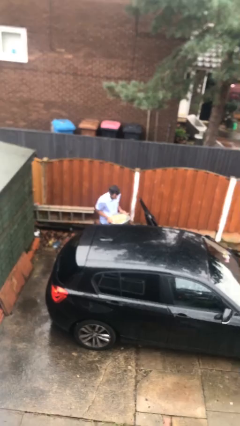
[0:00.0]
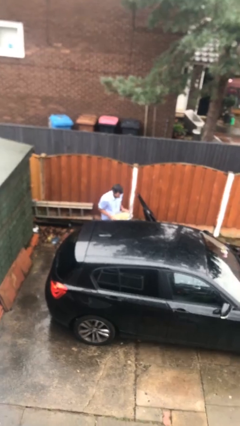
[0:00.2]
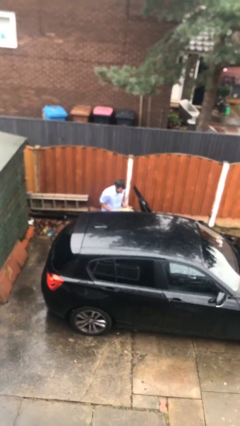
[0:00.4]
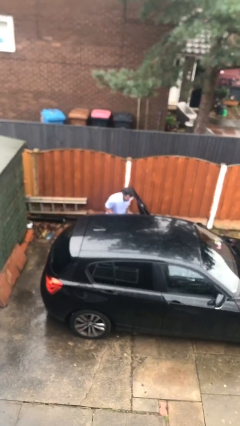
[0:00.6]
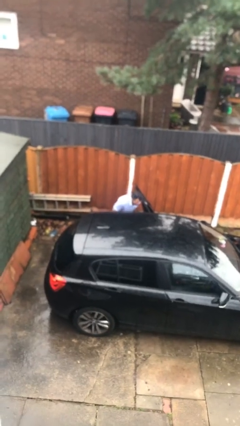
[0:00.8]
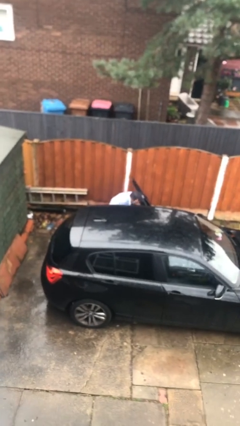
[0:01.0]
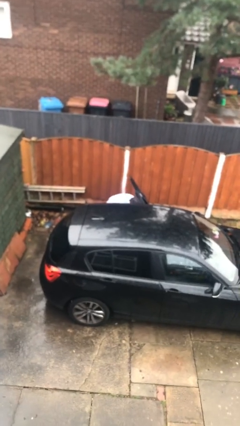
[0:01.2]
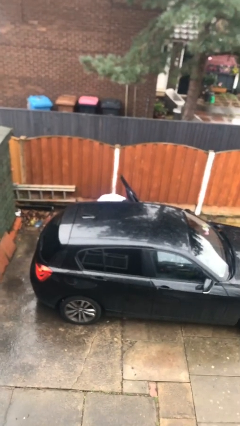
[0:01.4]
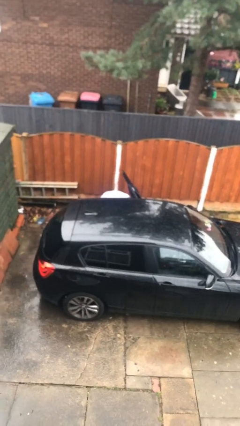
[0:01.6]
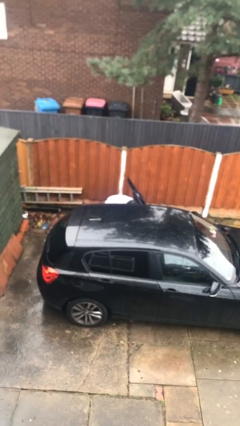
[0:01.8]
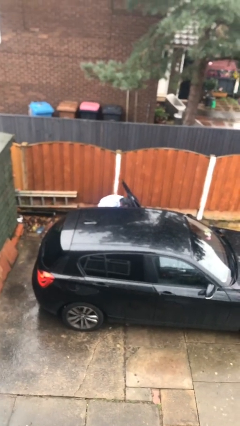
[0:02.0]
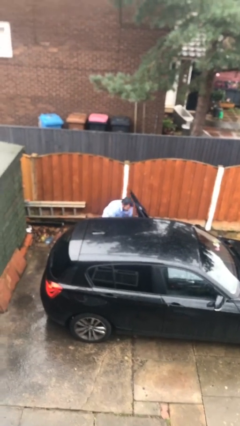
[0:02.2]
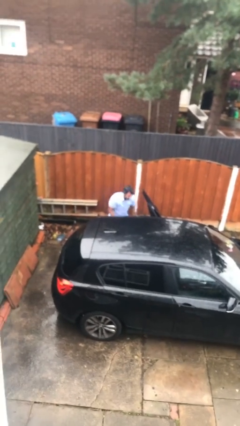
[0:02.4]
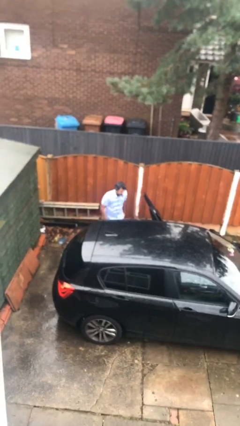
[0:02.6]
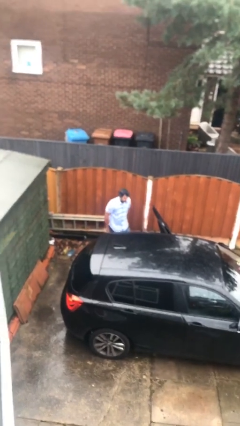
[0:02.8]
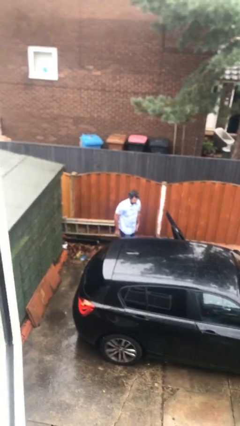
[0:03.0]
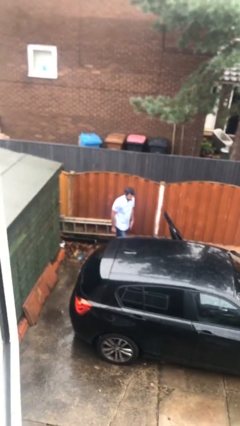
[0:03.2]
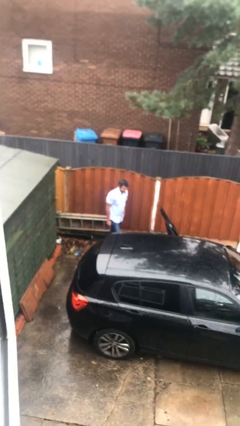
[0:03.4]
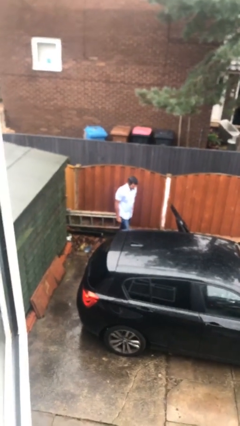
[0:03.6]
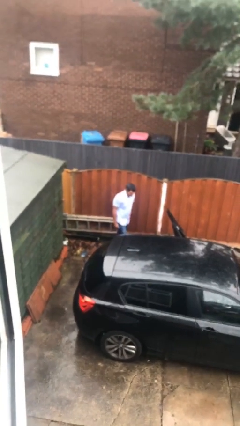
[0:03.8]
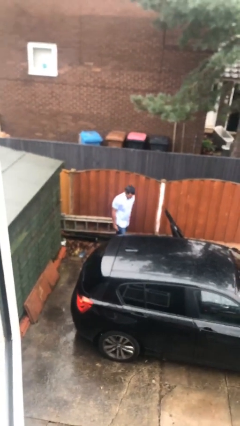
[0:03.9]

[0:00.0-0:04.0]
person loads car

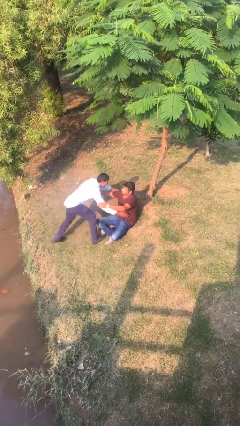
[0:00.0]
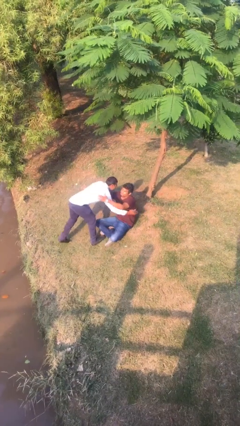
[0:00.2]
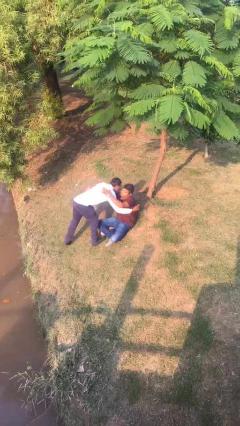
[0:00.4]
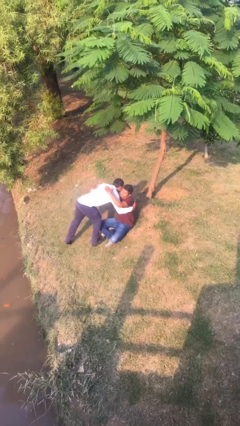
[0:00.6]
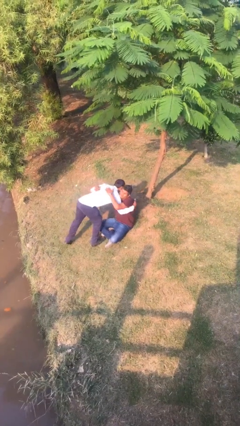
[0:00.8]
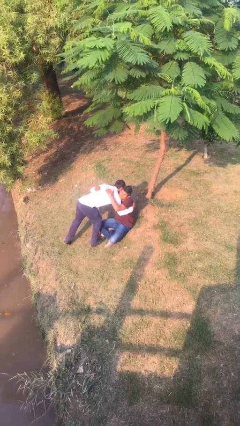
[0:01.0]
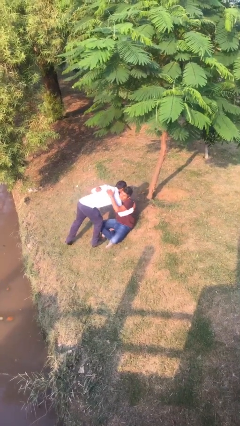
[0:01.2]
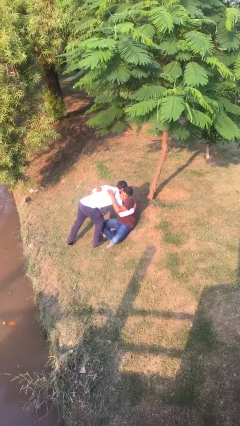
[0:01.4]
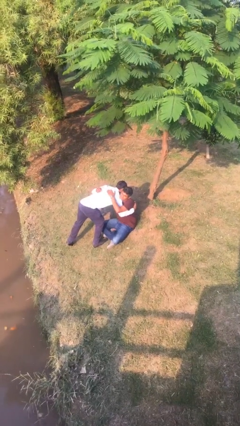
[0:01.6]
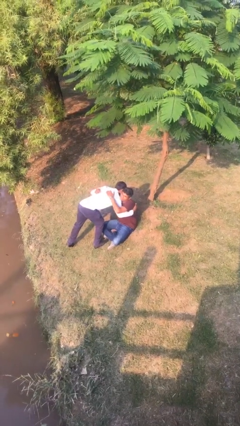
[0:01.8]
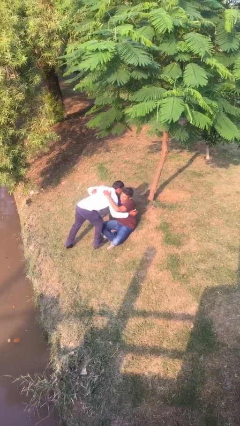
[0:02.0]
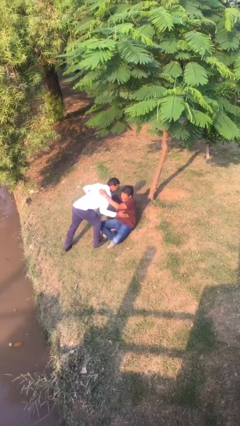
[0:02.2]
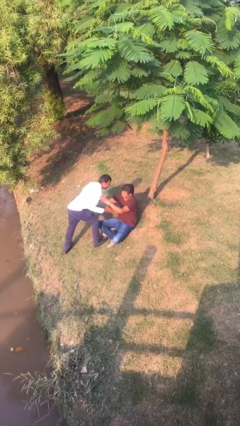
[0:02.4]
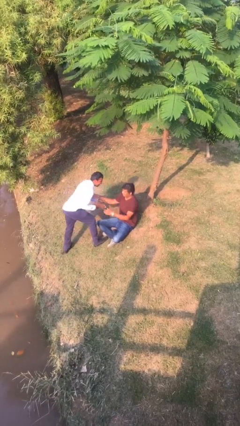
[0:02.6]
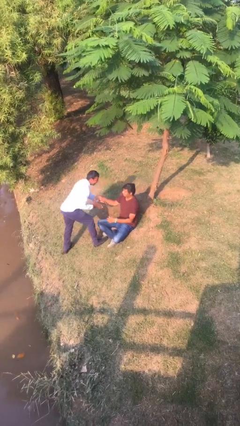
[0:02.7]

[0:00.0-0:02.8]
person embraces person

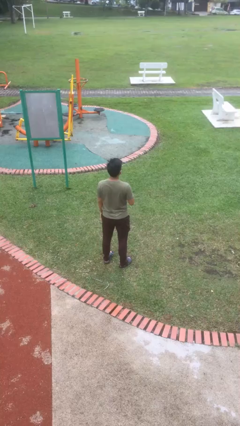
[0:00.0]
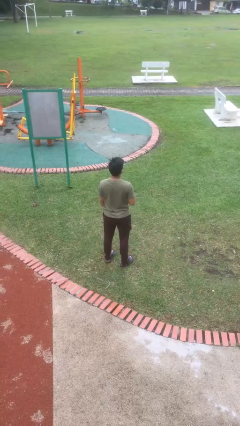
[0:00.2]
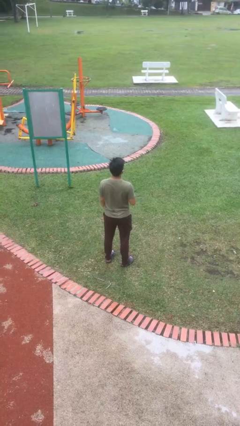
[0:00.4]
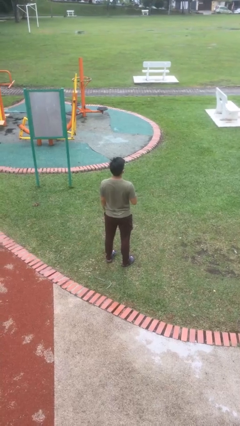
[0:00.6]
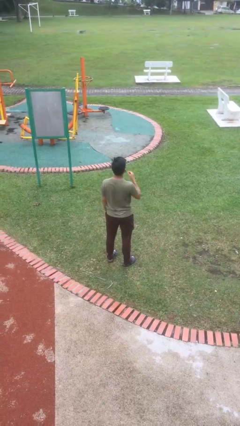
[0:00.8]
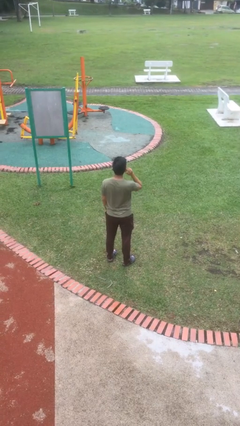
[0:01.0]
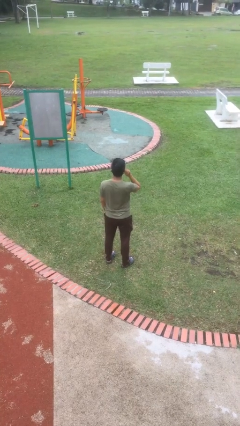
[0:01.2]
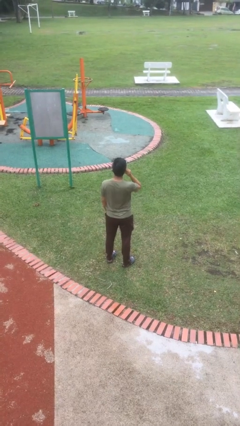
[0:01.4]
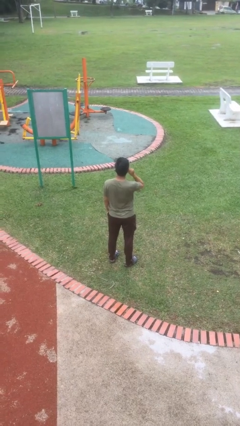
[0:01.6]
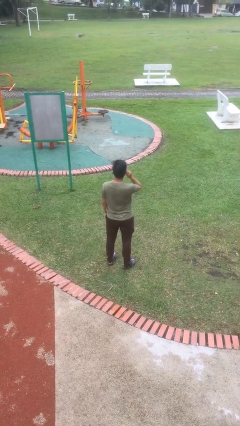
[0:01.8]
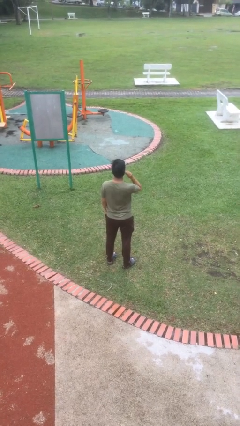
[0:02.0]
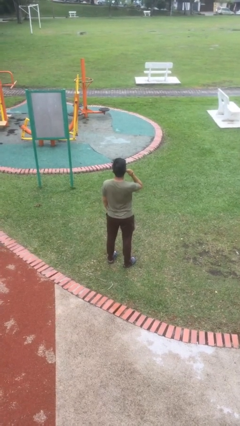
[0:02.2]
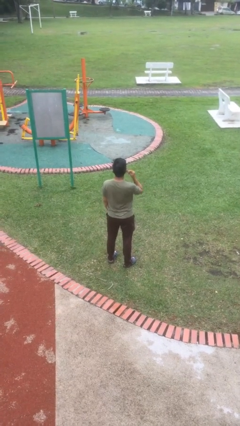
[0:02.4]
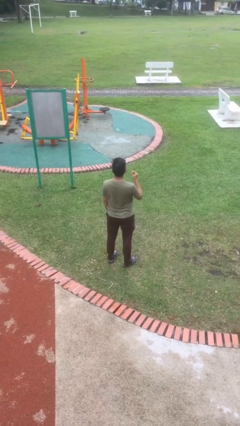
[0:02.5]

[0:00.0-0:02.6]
person touches earlobe

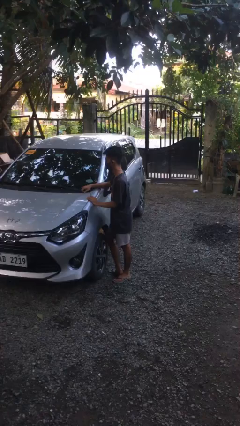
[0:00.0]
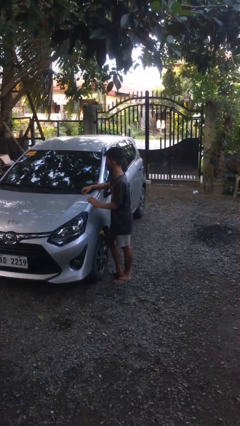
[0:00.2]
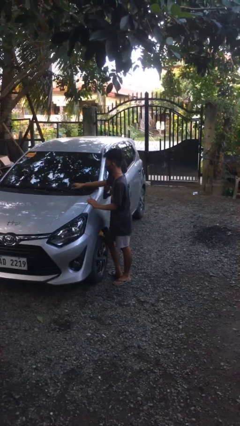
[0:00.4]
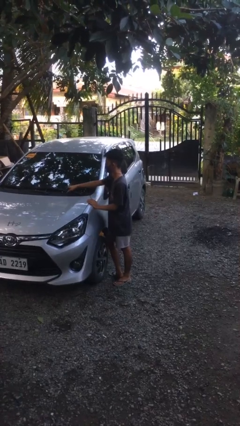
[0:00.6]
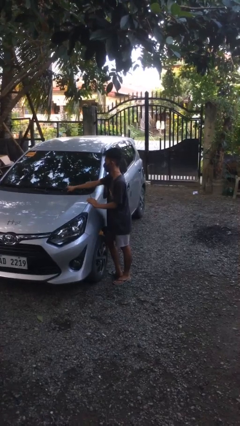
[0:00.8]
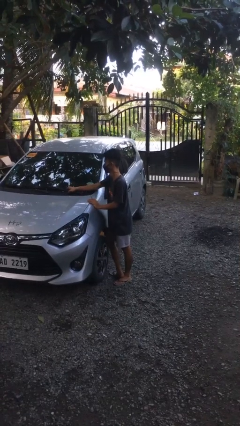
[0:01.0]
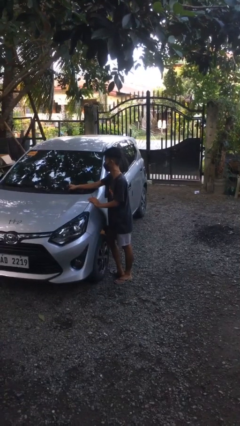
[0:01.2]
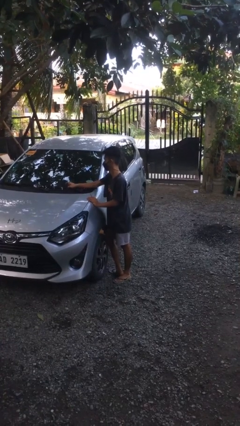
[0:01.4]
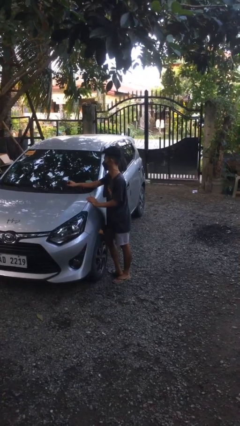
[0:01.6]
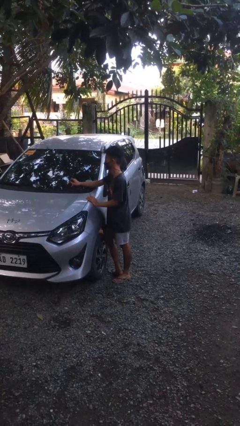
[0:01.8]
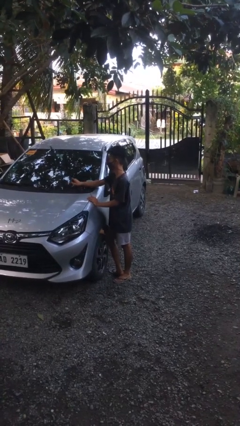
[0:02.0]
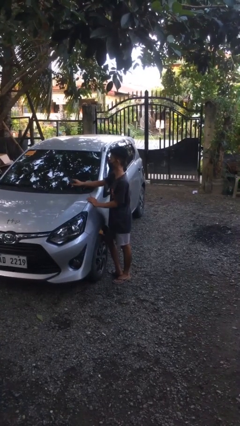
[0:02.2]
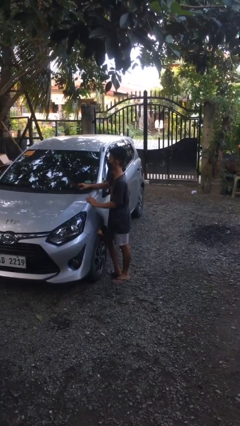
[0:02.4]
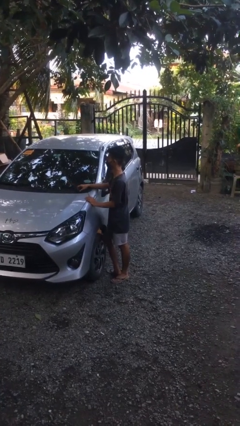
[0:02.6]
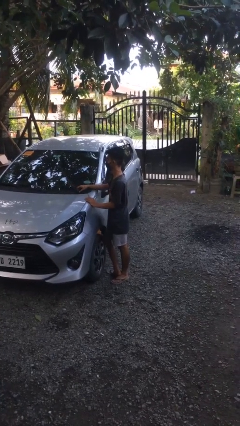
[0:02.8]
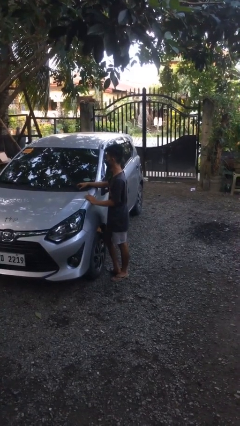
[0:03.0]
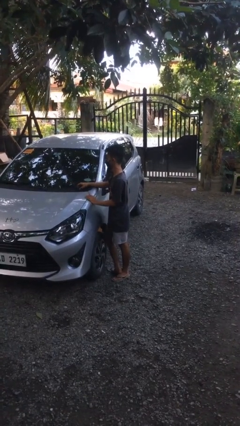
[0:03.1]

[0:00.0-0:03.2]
person flips up car wipers

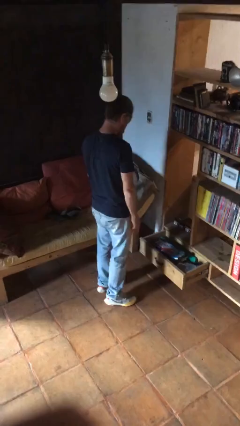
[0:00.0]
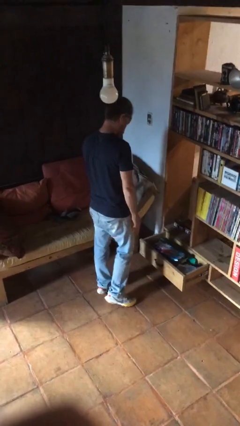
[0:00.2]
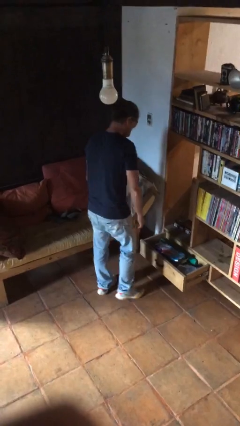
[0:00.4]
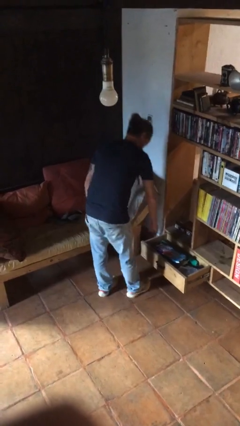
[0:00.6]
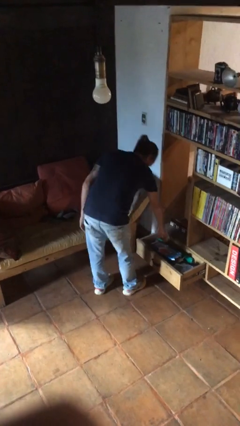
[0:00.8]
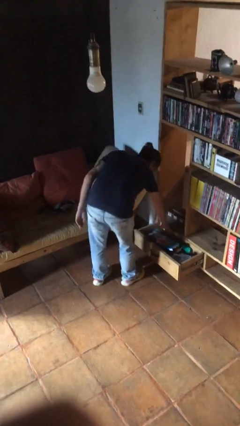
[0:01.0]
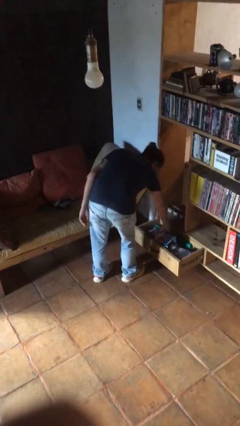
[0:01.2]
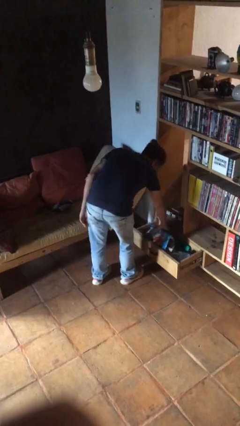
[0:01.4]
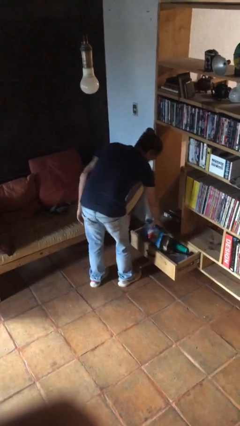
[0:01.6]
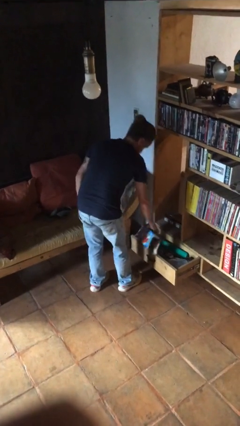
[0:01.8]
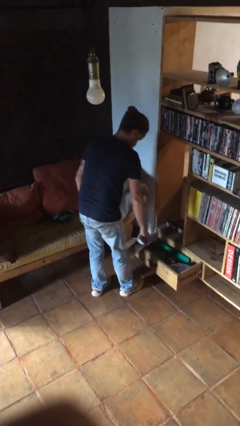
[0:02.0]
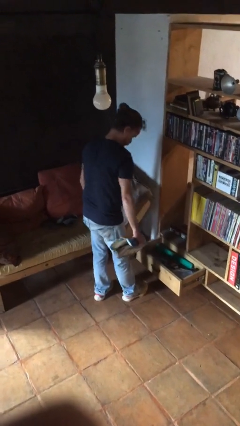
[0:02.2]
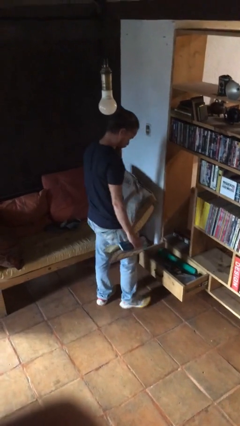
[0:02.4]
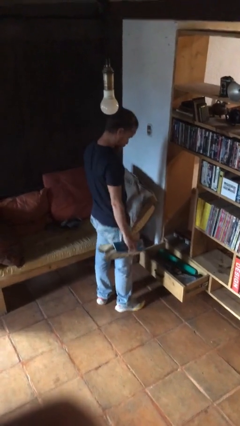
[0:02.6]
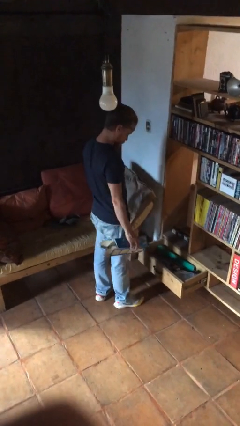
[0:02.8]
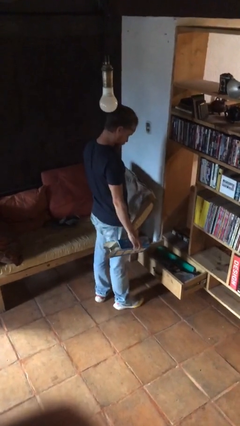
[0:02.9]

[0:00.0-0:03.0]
person picks up object from cabinet

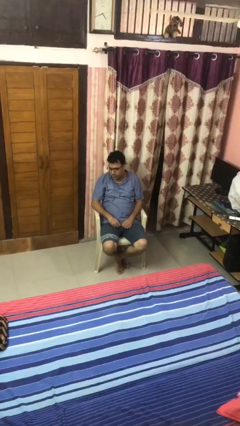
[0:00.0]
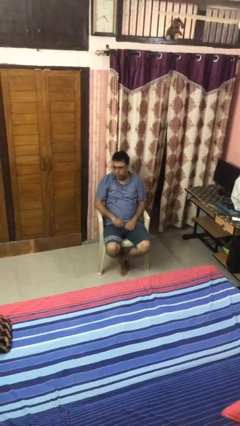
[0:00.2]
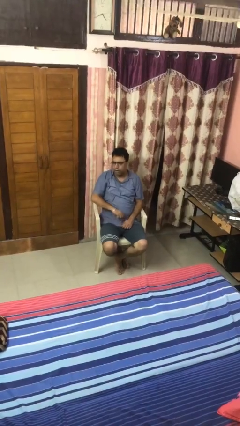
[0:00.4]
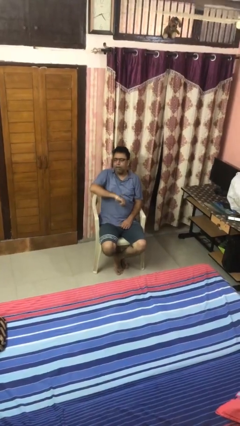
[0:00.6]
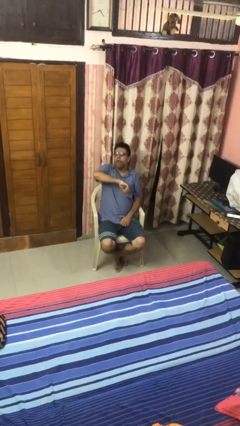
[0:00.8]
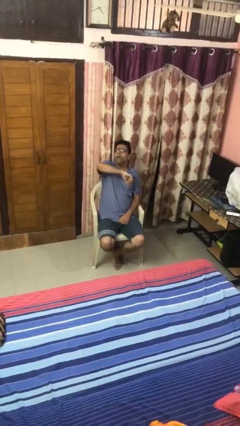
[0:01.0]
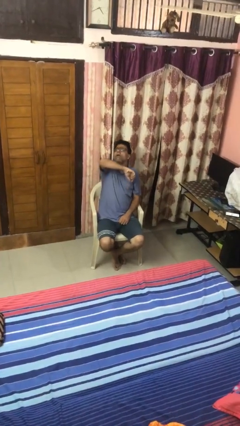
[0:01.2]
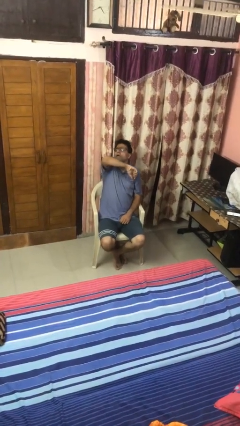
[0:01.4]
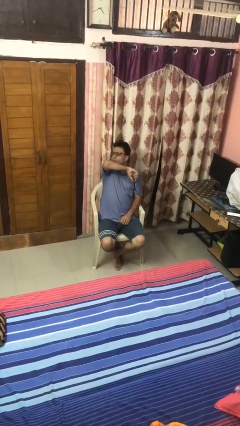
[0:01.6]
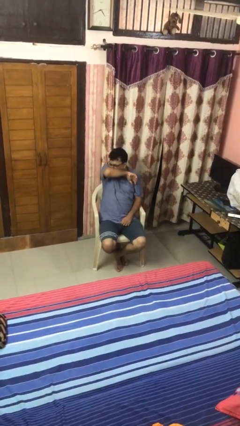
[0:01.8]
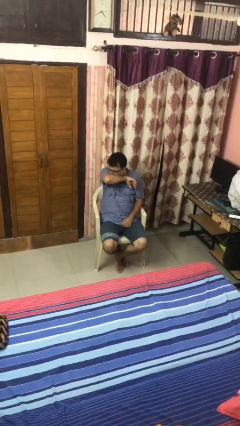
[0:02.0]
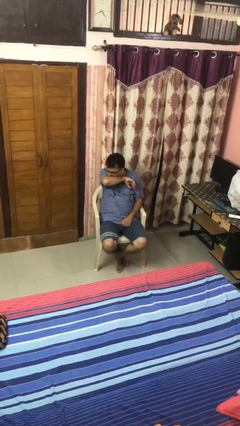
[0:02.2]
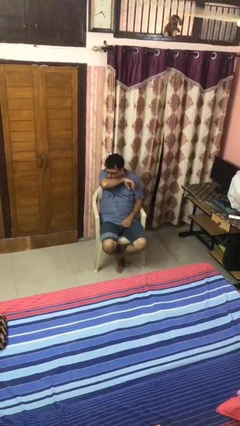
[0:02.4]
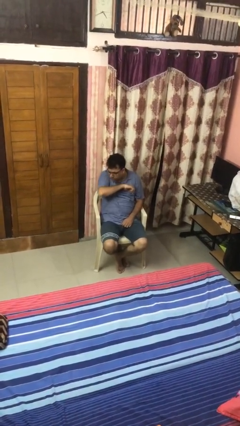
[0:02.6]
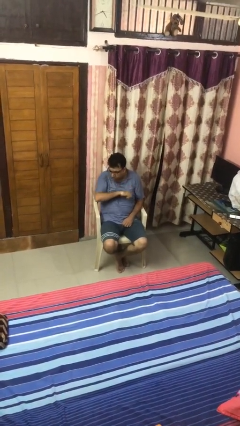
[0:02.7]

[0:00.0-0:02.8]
person sneezes into arm
